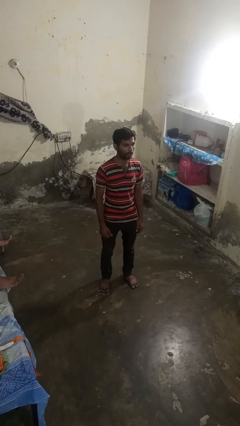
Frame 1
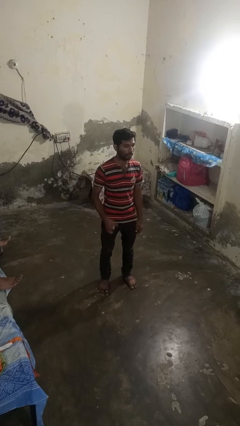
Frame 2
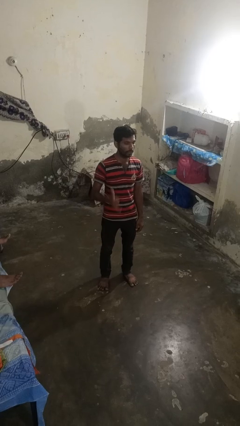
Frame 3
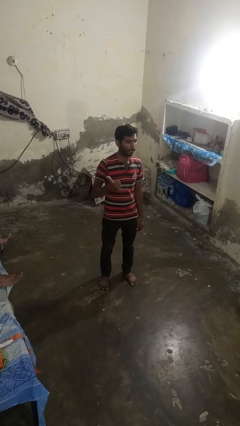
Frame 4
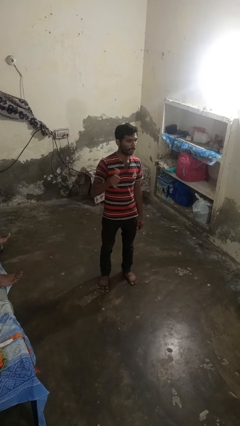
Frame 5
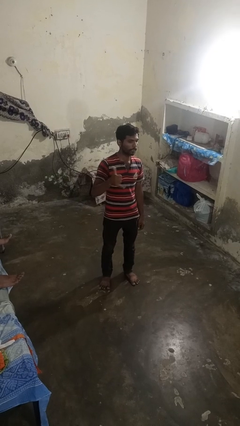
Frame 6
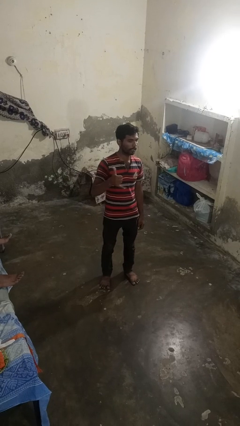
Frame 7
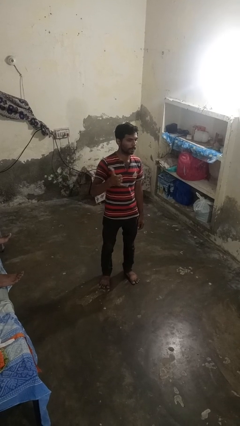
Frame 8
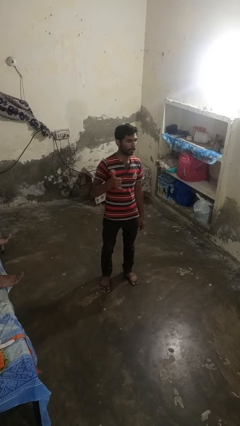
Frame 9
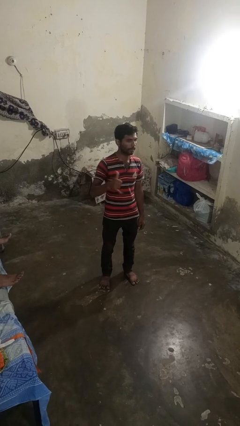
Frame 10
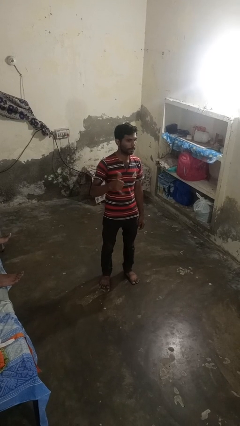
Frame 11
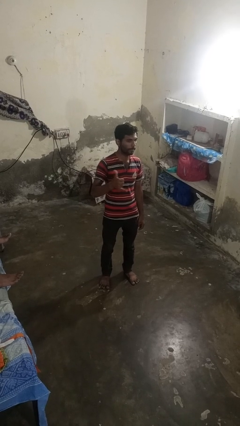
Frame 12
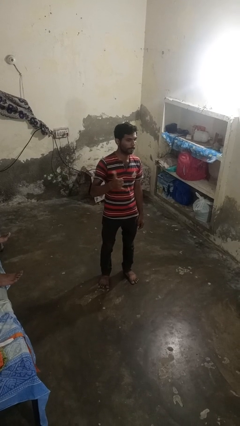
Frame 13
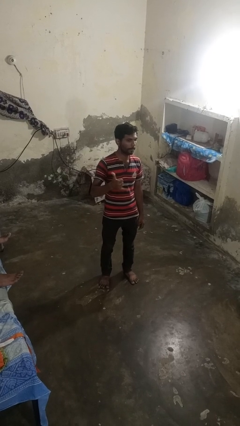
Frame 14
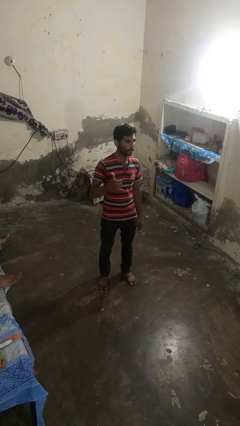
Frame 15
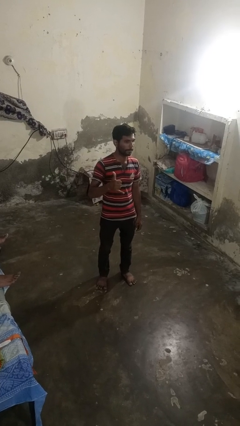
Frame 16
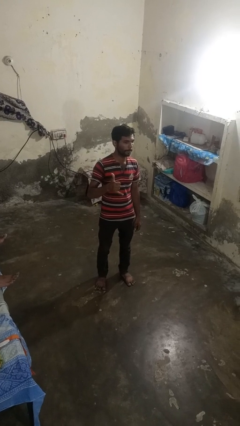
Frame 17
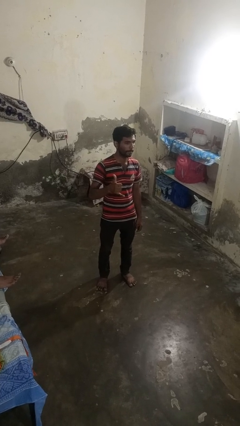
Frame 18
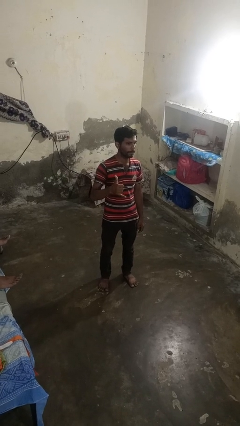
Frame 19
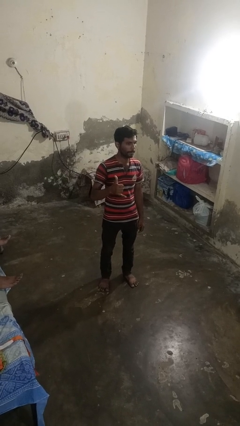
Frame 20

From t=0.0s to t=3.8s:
person gestures hang loose

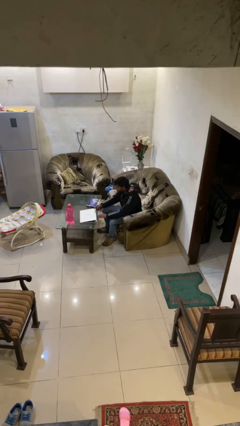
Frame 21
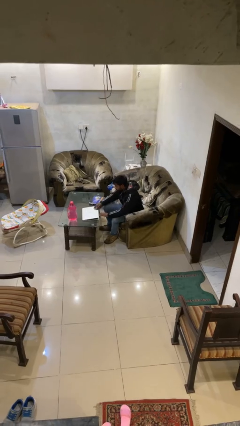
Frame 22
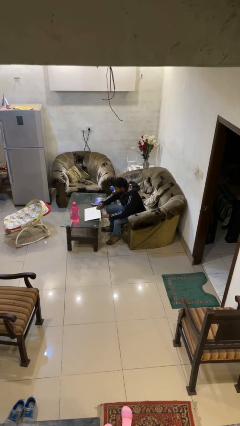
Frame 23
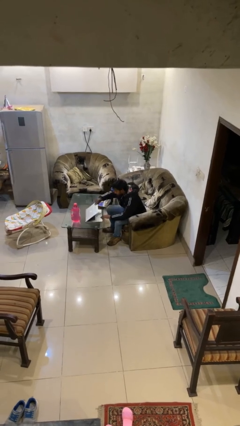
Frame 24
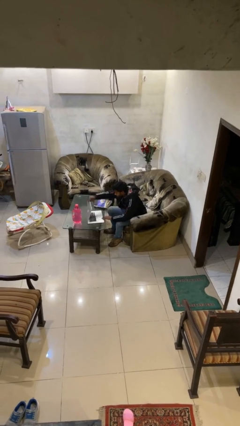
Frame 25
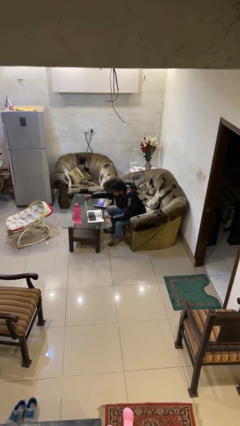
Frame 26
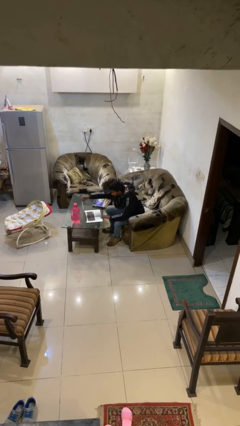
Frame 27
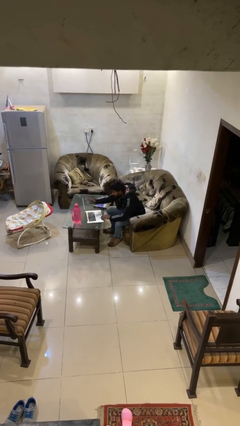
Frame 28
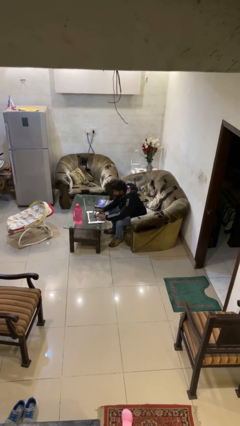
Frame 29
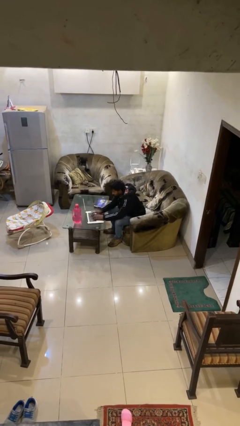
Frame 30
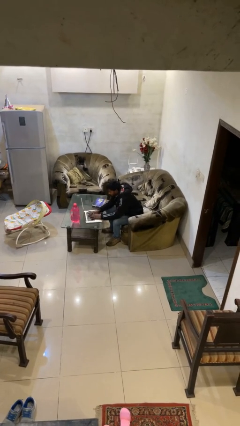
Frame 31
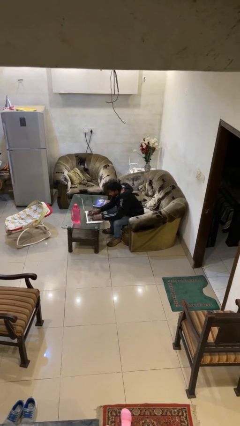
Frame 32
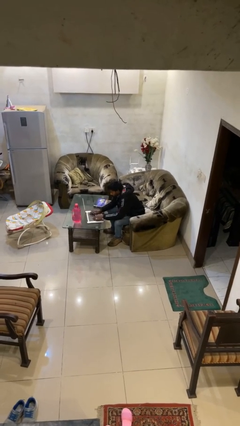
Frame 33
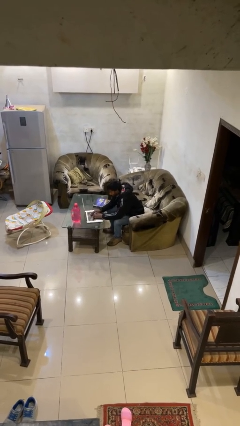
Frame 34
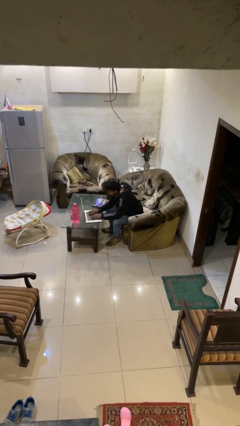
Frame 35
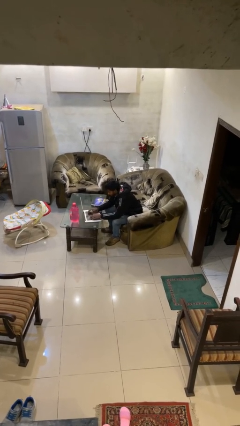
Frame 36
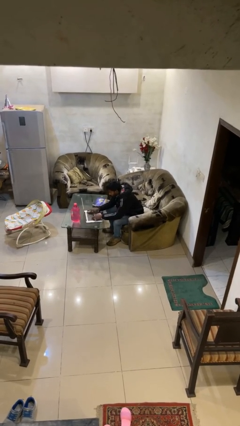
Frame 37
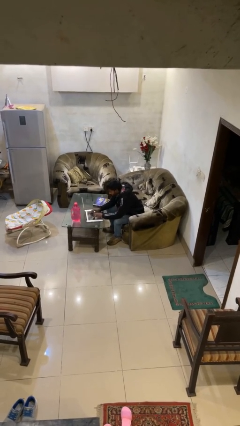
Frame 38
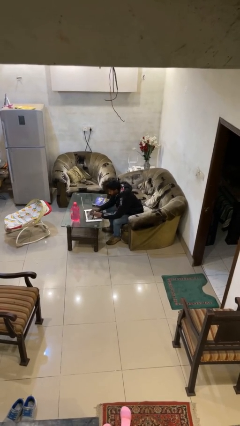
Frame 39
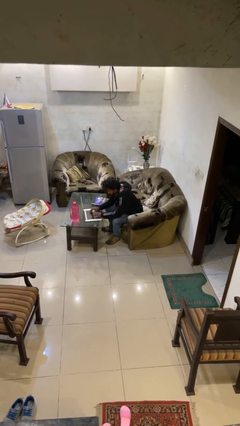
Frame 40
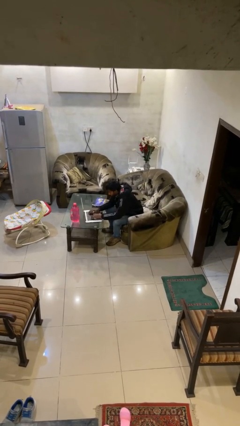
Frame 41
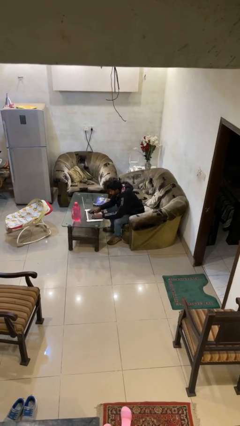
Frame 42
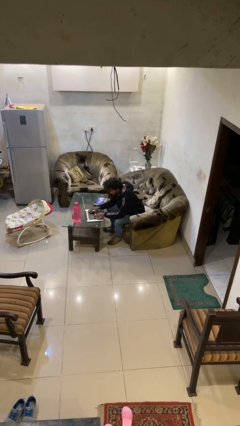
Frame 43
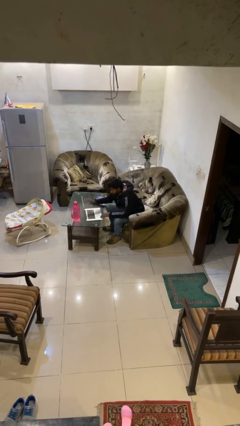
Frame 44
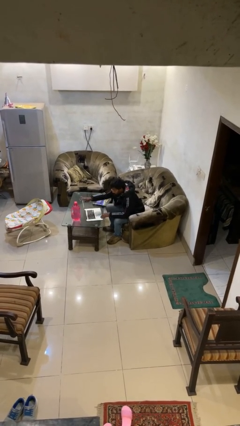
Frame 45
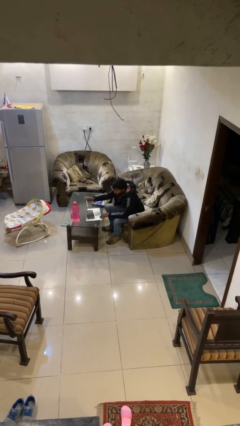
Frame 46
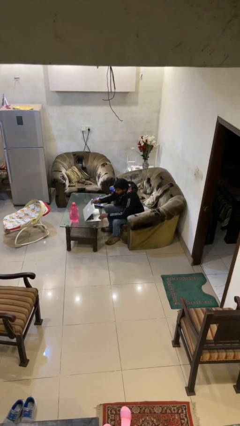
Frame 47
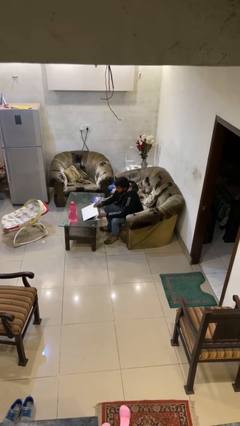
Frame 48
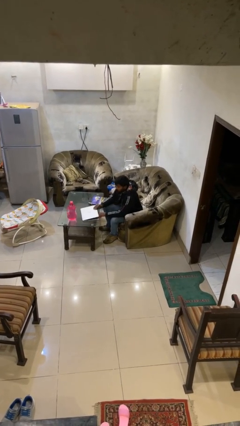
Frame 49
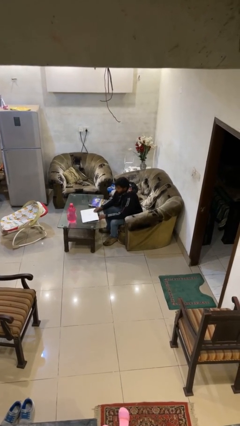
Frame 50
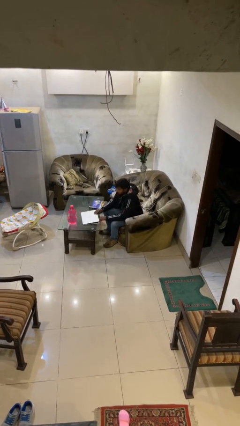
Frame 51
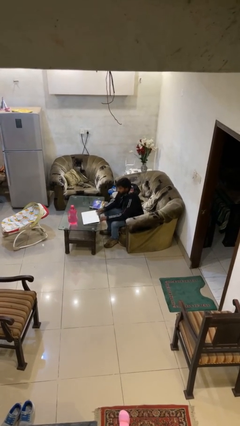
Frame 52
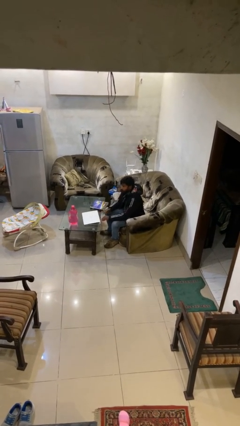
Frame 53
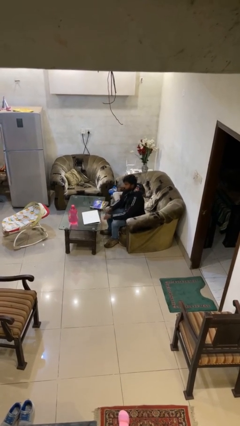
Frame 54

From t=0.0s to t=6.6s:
person interacts with laptop

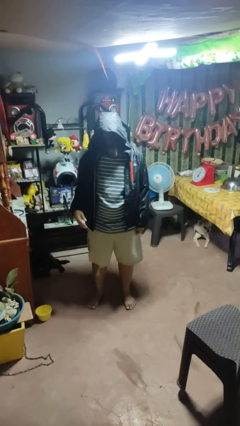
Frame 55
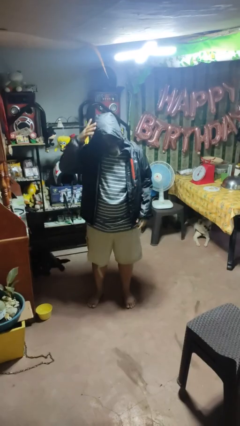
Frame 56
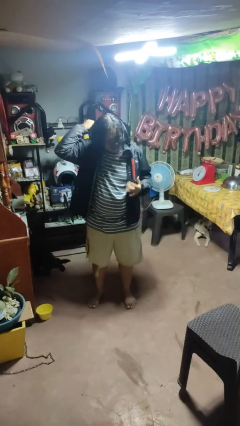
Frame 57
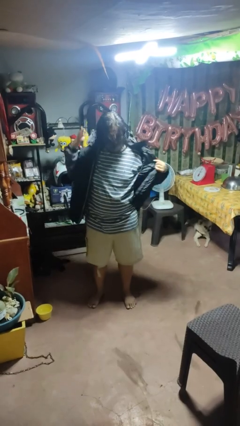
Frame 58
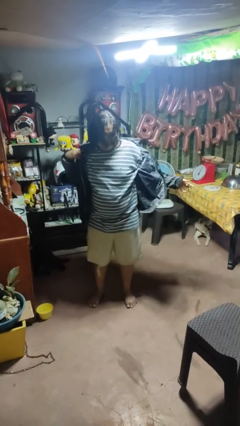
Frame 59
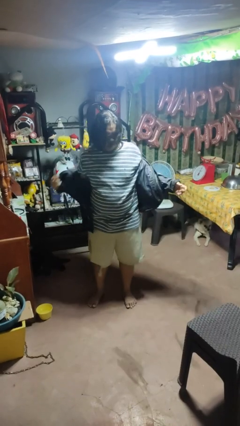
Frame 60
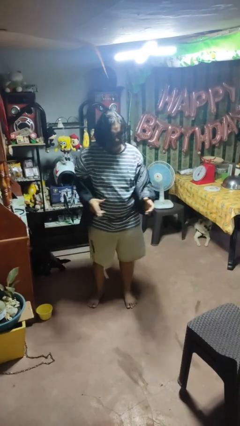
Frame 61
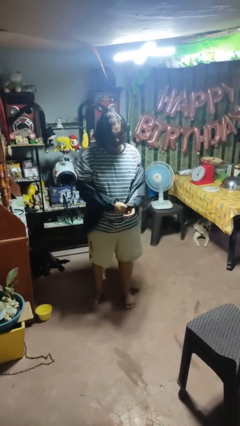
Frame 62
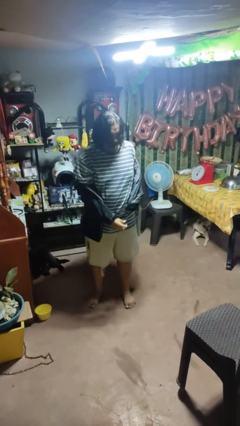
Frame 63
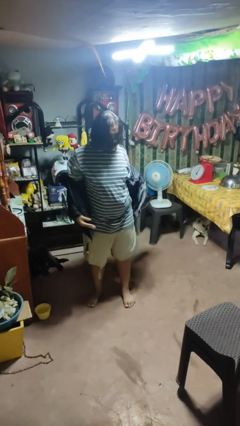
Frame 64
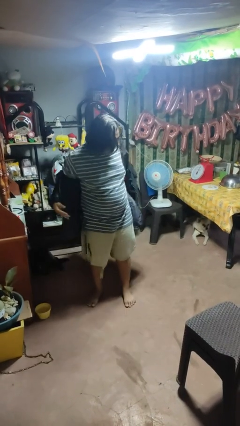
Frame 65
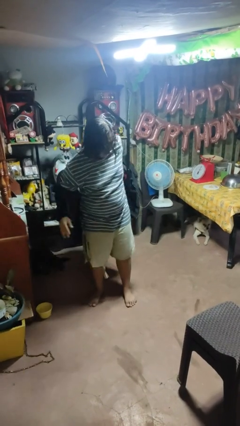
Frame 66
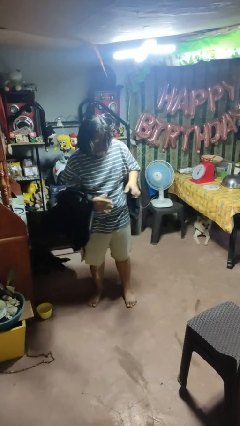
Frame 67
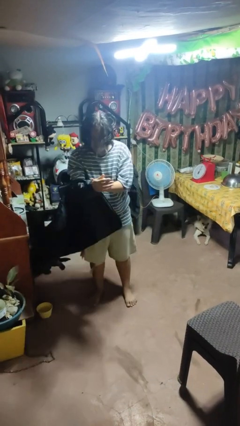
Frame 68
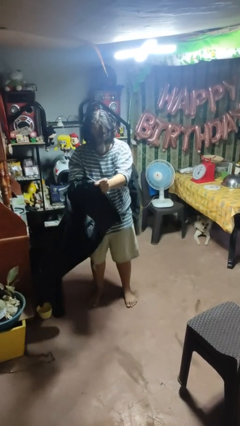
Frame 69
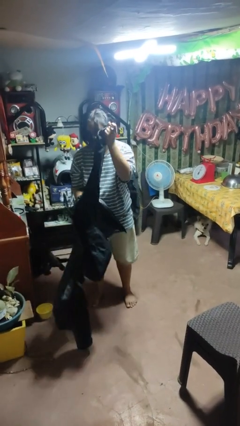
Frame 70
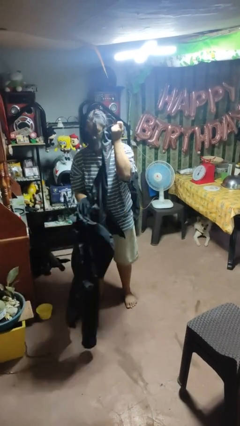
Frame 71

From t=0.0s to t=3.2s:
person takes off hoodie

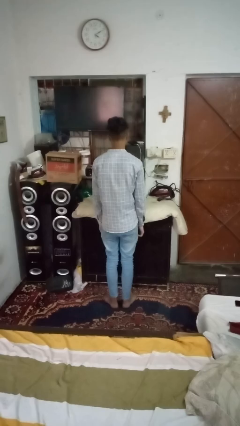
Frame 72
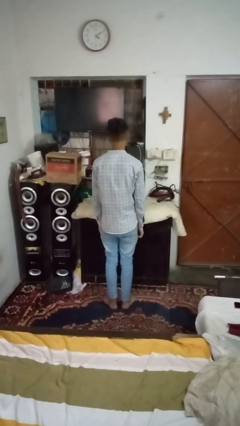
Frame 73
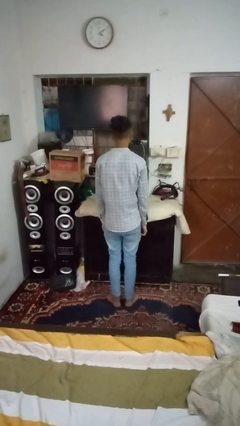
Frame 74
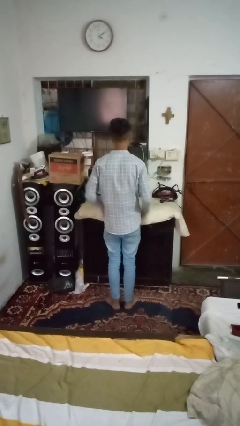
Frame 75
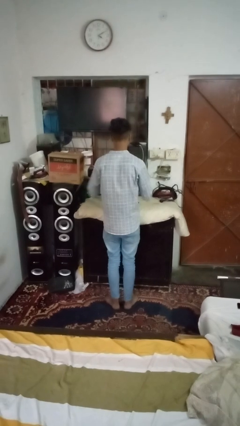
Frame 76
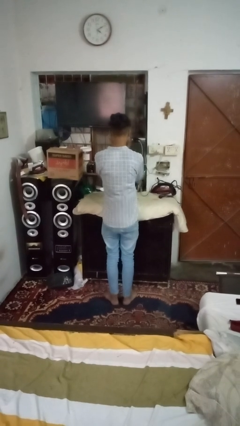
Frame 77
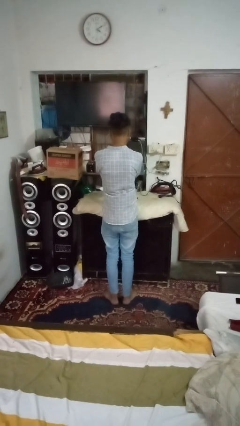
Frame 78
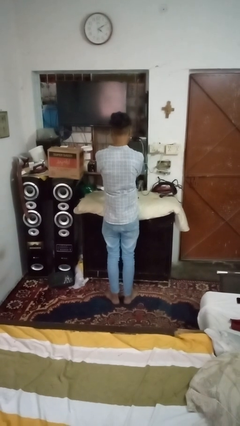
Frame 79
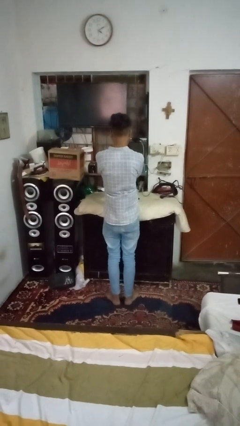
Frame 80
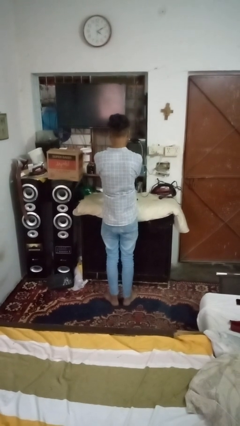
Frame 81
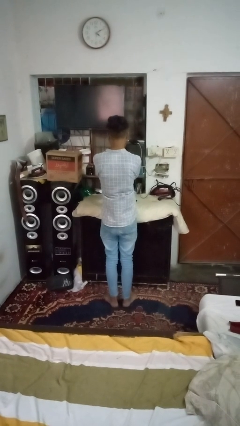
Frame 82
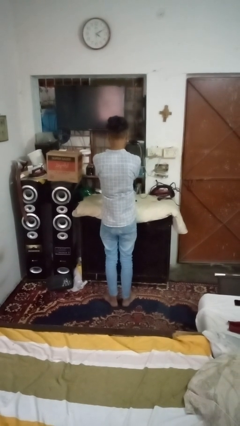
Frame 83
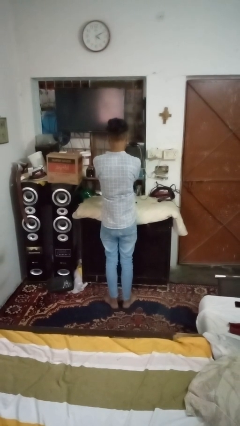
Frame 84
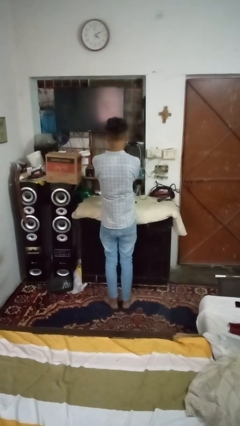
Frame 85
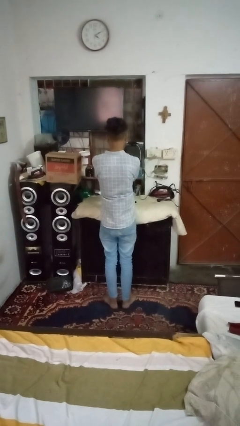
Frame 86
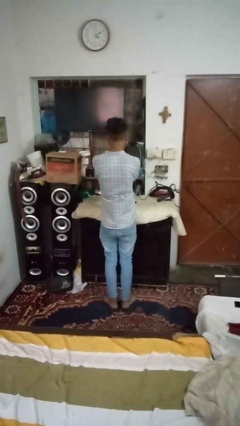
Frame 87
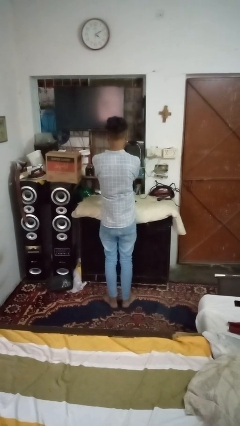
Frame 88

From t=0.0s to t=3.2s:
person covers face with hands

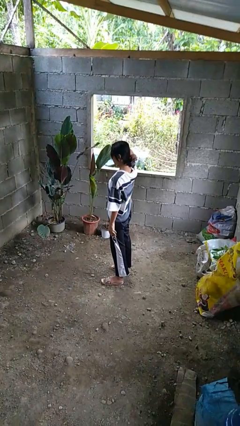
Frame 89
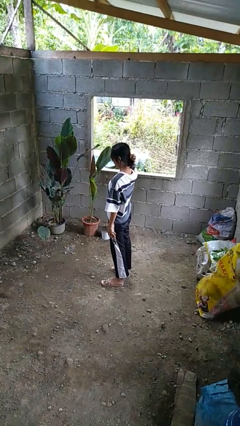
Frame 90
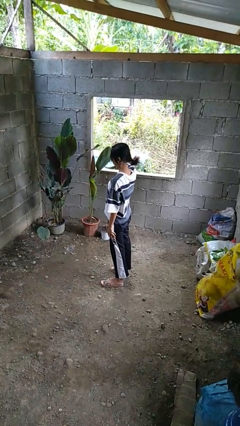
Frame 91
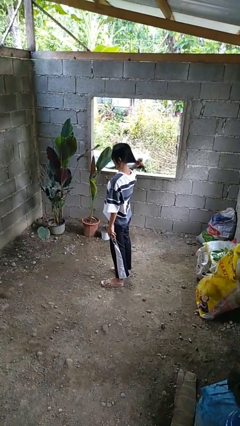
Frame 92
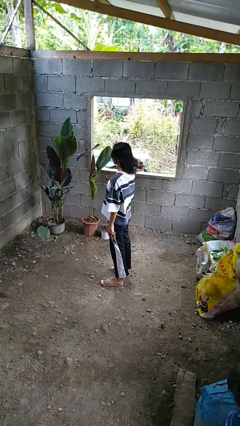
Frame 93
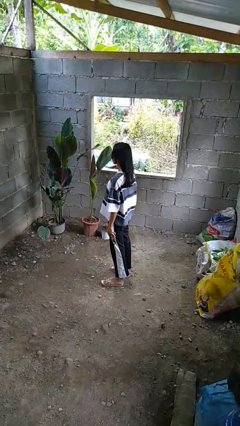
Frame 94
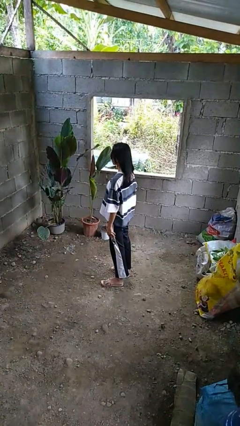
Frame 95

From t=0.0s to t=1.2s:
person takes off hairtie
